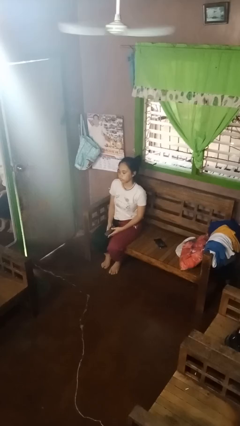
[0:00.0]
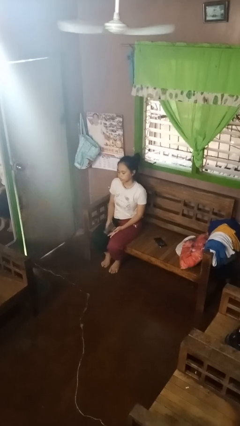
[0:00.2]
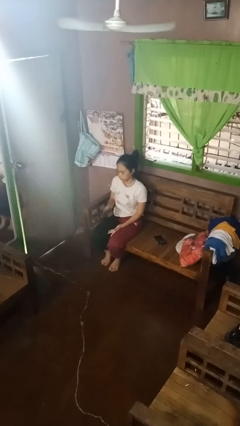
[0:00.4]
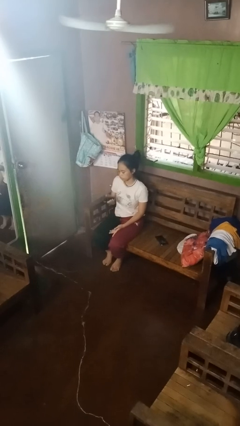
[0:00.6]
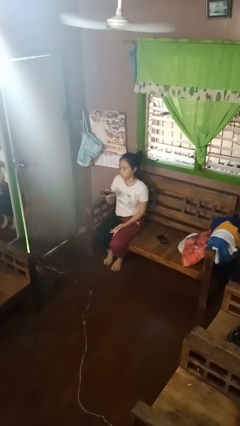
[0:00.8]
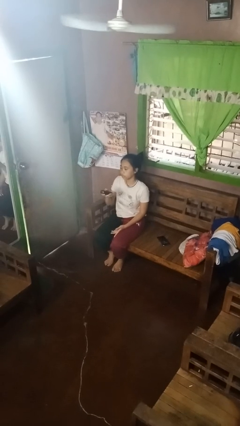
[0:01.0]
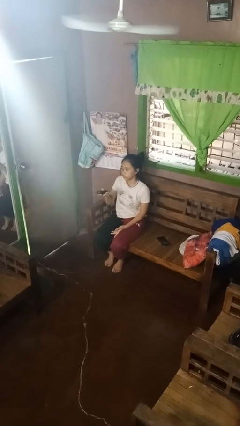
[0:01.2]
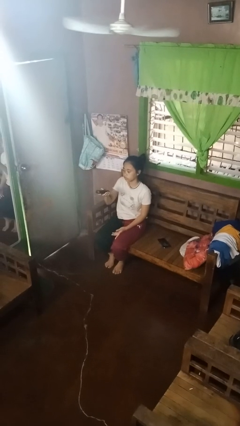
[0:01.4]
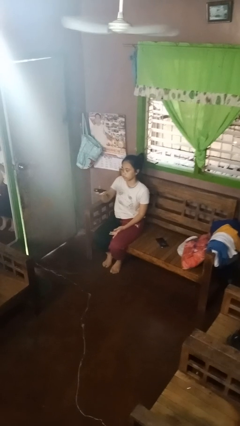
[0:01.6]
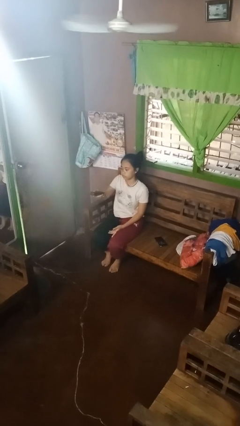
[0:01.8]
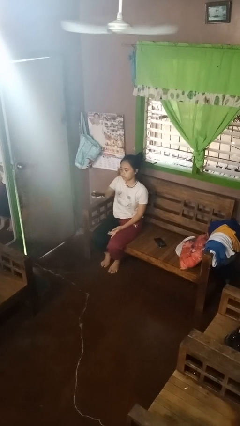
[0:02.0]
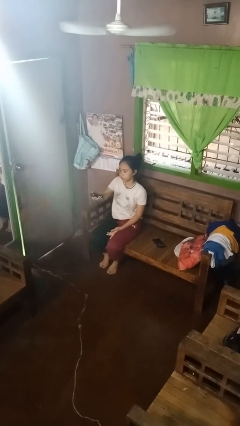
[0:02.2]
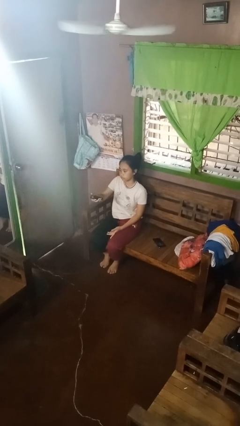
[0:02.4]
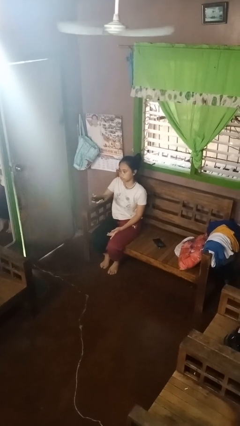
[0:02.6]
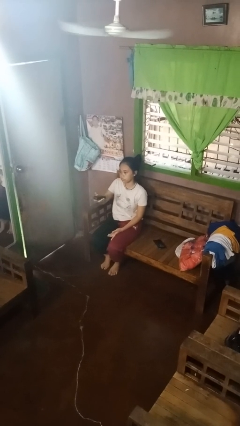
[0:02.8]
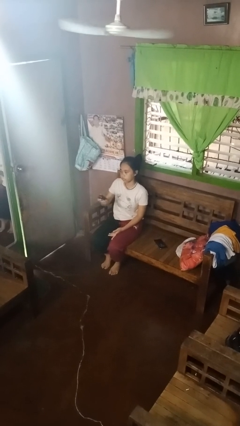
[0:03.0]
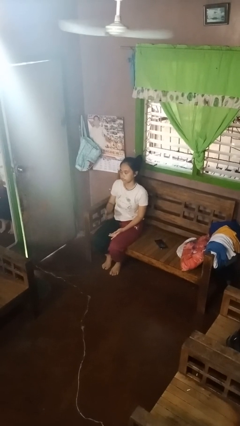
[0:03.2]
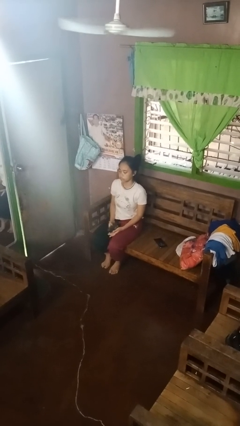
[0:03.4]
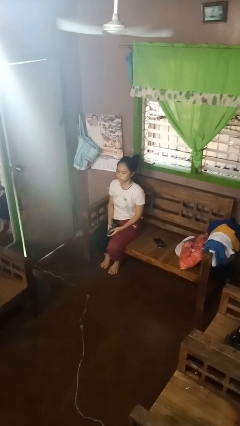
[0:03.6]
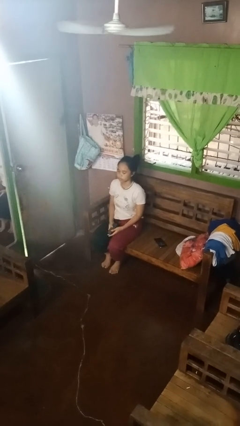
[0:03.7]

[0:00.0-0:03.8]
person uses television remote

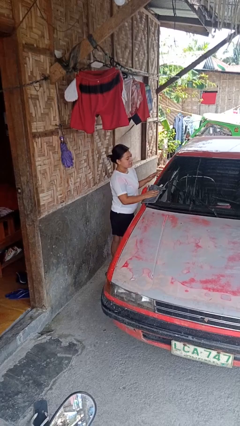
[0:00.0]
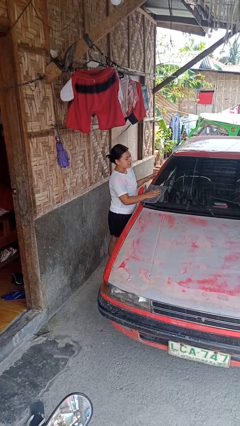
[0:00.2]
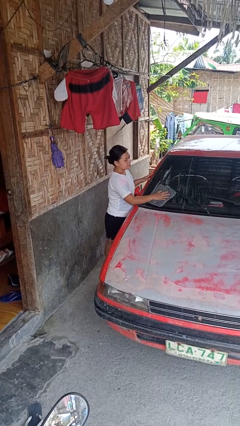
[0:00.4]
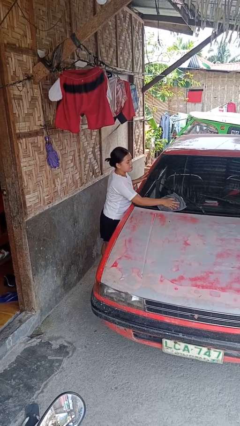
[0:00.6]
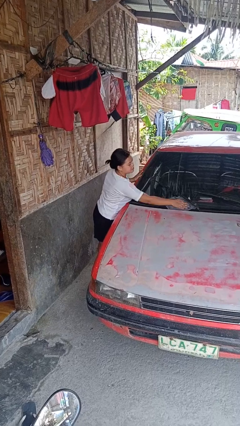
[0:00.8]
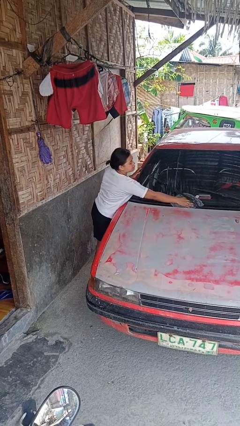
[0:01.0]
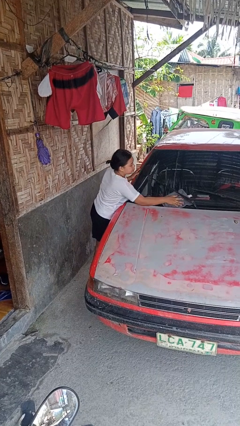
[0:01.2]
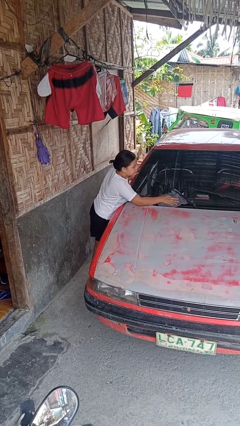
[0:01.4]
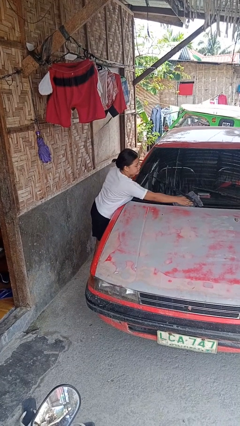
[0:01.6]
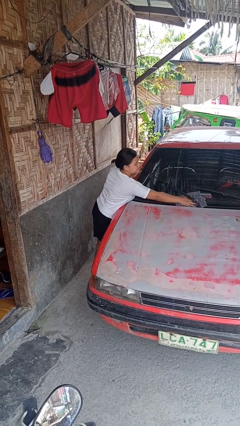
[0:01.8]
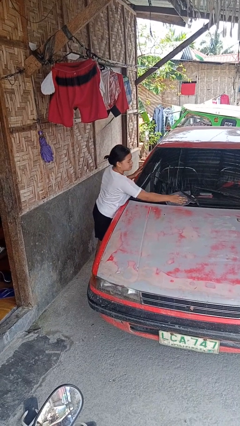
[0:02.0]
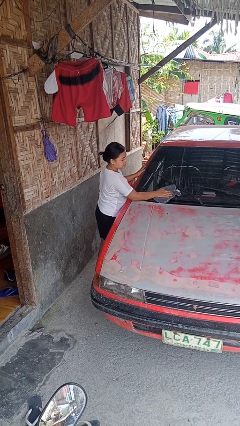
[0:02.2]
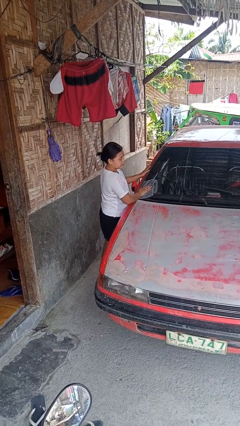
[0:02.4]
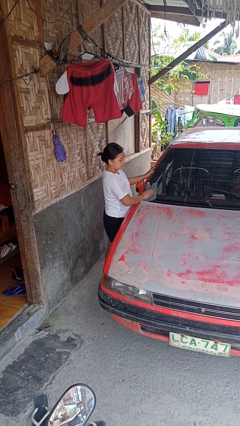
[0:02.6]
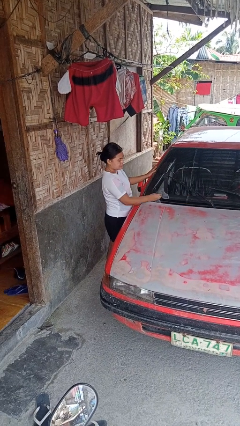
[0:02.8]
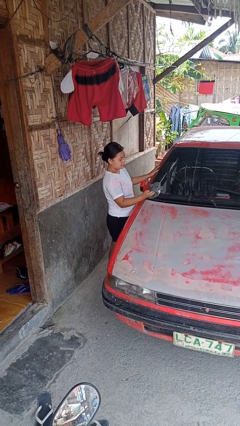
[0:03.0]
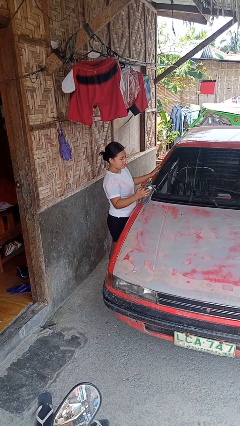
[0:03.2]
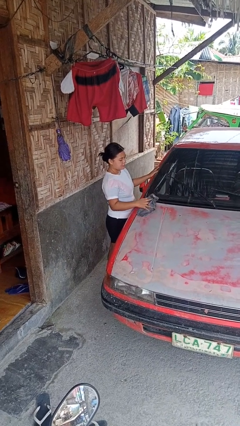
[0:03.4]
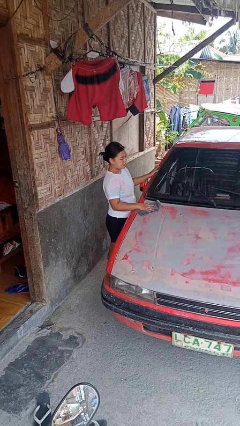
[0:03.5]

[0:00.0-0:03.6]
person polishes car with rag

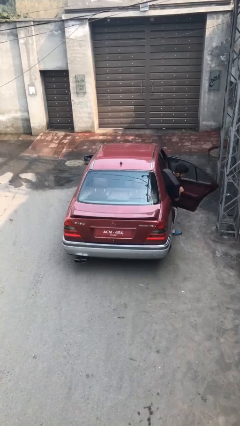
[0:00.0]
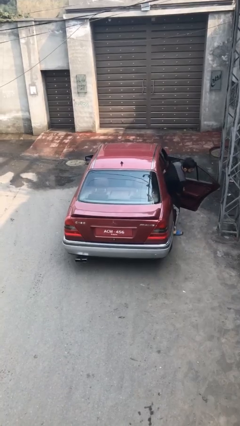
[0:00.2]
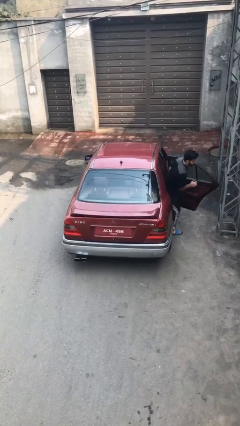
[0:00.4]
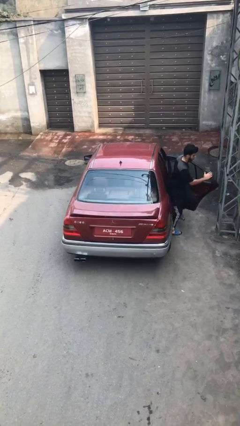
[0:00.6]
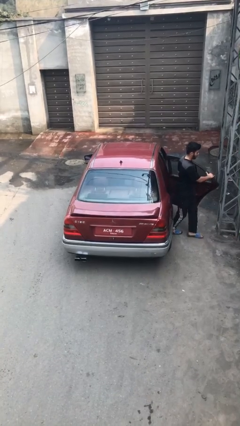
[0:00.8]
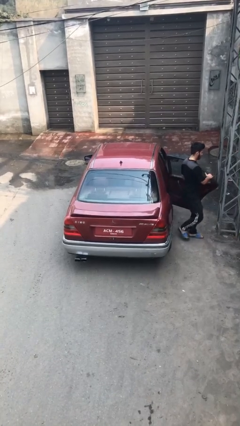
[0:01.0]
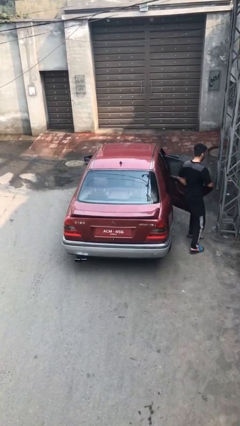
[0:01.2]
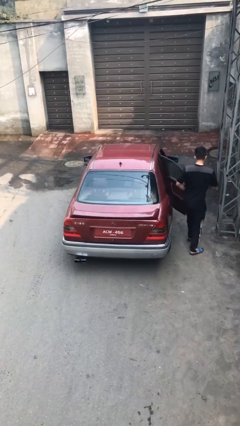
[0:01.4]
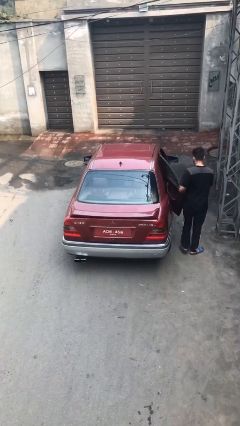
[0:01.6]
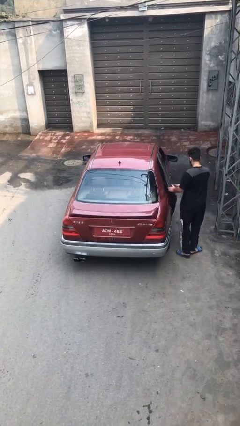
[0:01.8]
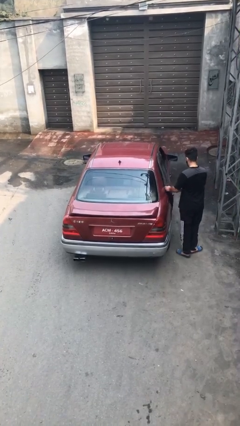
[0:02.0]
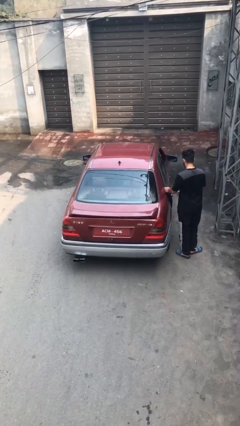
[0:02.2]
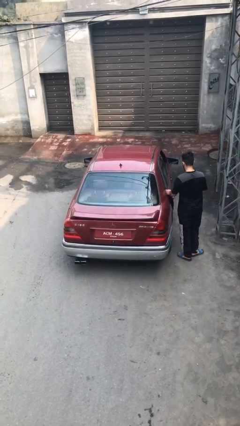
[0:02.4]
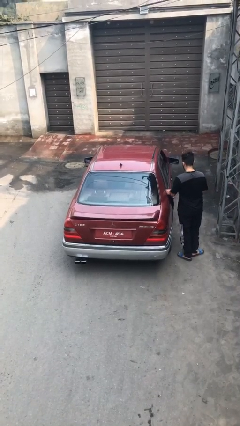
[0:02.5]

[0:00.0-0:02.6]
car drops off person

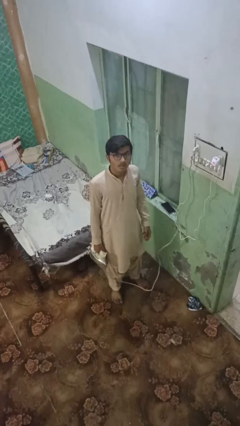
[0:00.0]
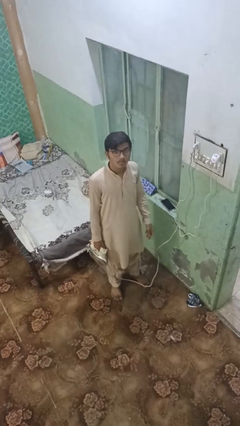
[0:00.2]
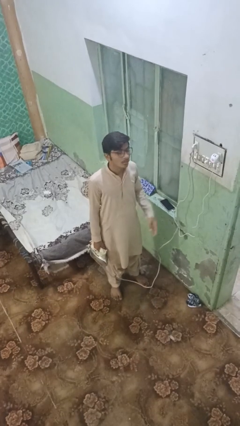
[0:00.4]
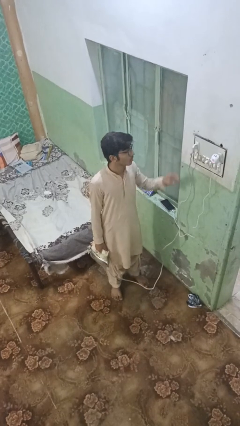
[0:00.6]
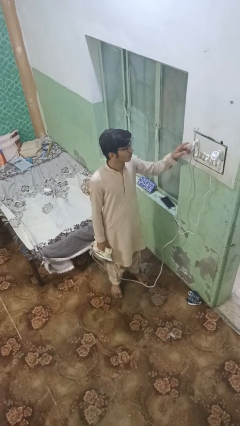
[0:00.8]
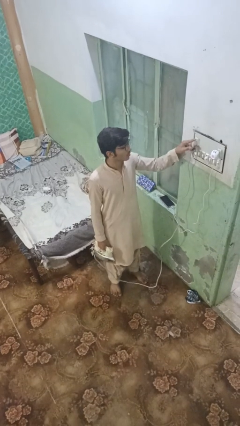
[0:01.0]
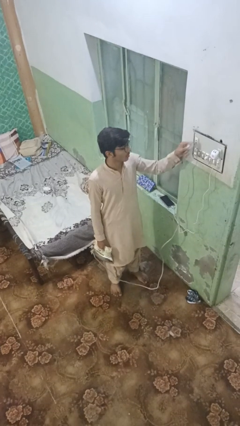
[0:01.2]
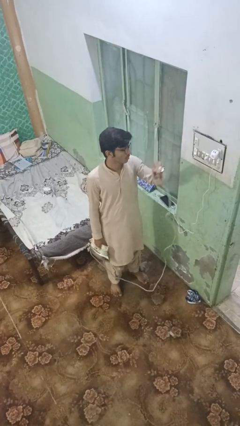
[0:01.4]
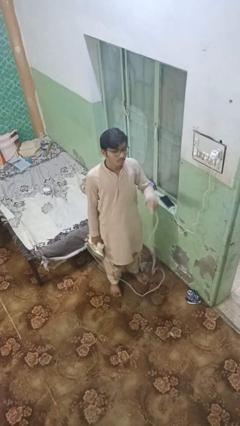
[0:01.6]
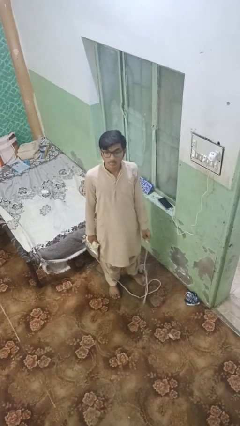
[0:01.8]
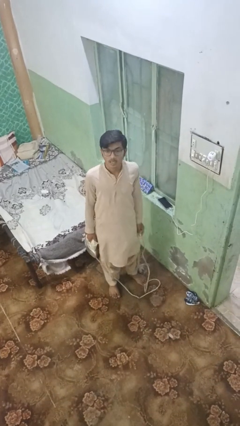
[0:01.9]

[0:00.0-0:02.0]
person unplugs from electrical socket

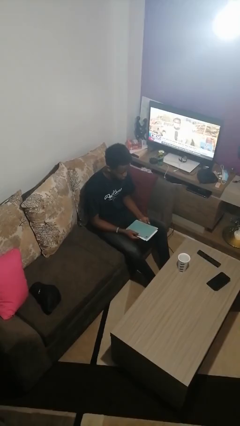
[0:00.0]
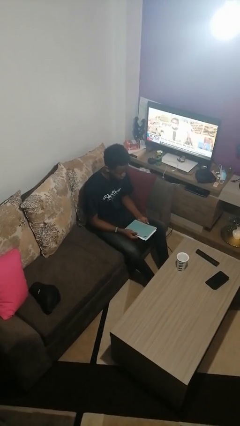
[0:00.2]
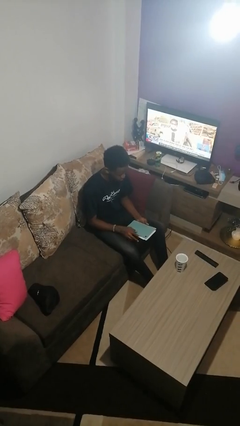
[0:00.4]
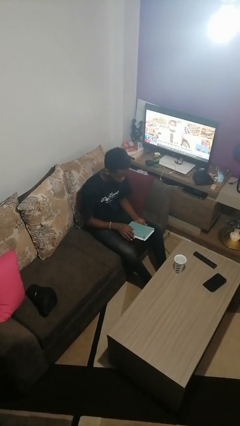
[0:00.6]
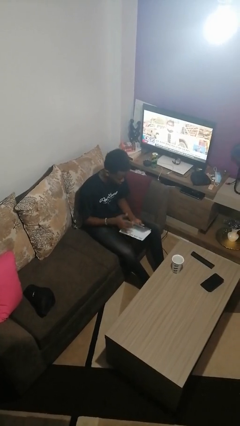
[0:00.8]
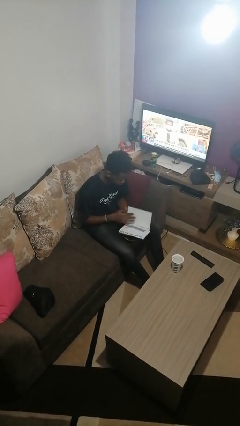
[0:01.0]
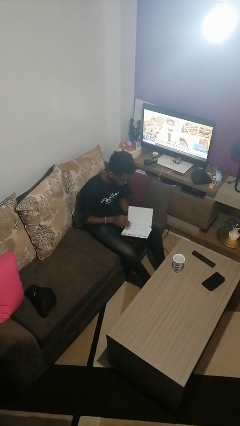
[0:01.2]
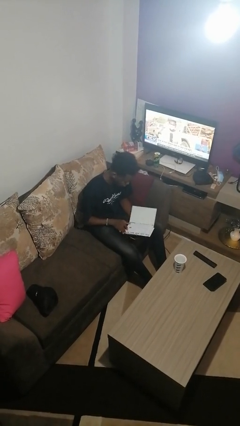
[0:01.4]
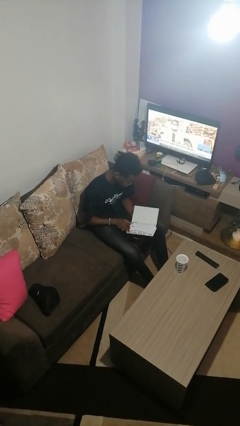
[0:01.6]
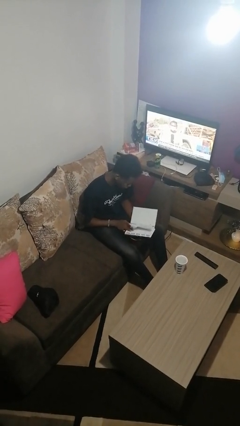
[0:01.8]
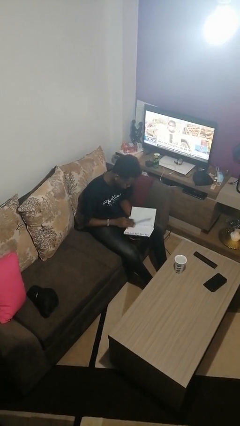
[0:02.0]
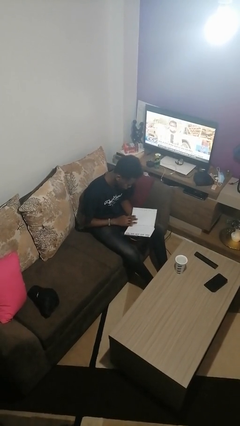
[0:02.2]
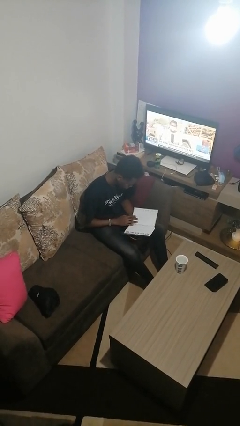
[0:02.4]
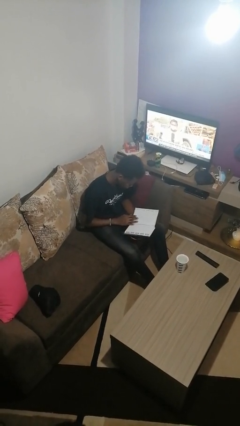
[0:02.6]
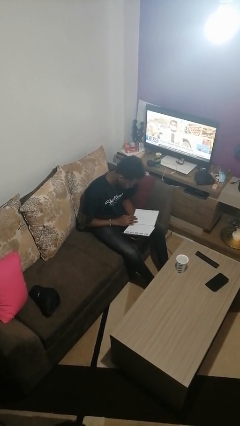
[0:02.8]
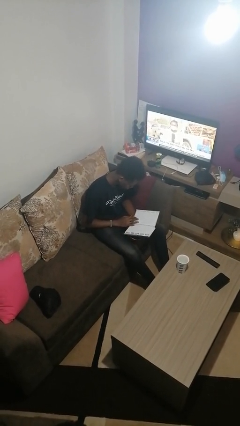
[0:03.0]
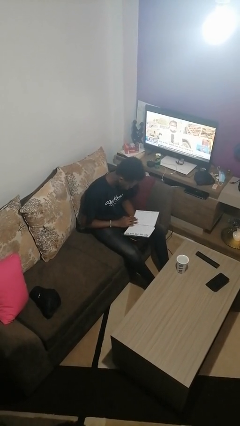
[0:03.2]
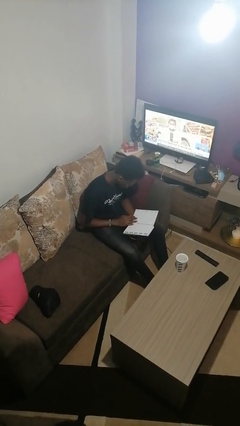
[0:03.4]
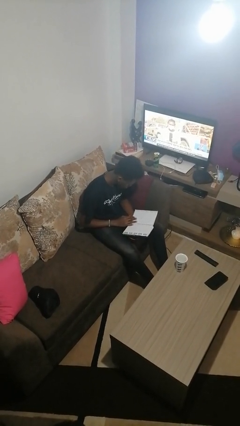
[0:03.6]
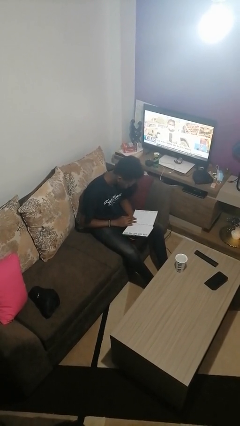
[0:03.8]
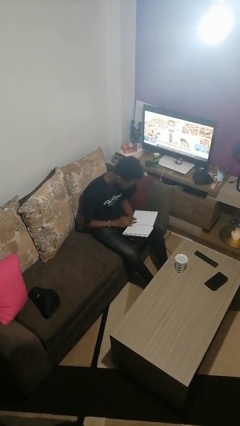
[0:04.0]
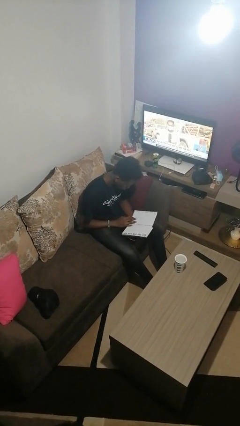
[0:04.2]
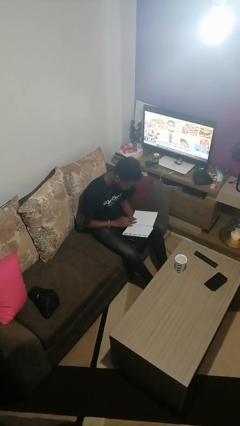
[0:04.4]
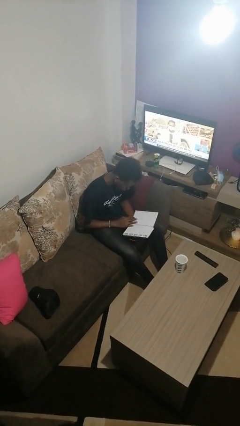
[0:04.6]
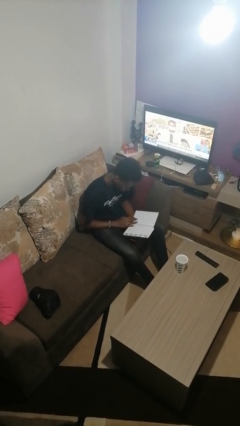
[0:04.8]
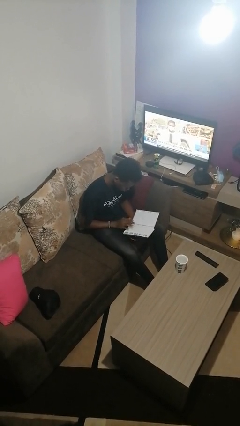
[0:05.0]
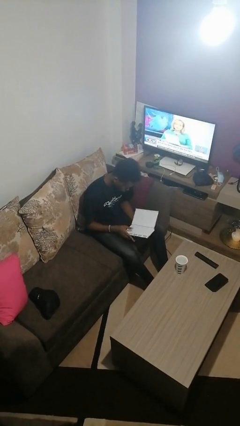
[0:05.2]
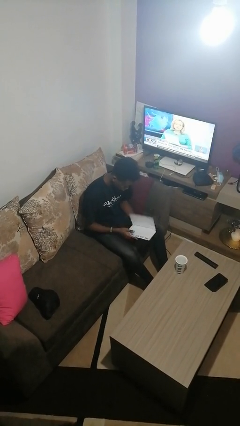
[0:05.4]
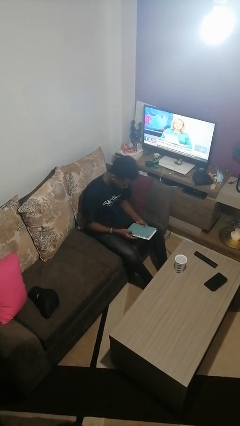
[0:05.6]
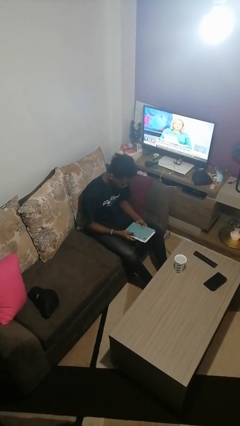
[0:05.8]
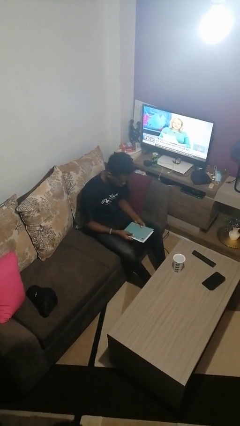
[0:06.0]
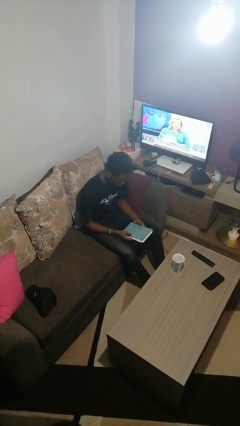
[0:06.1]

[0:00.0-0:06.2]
person reads book
